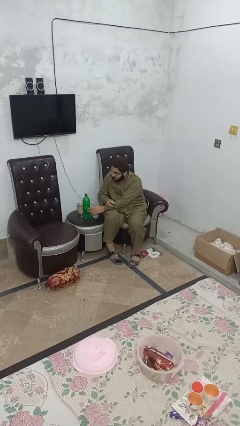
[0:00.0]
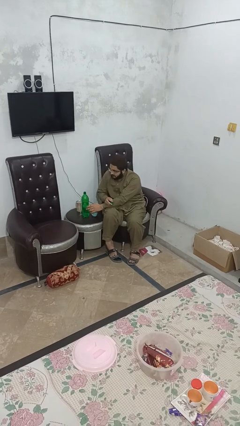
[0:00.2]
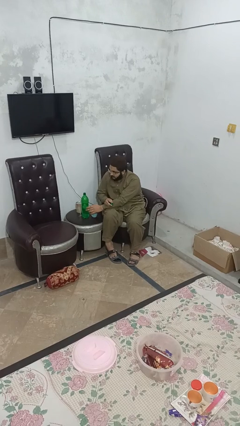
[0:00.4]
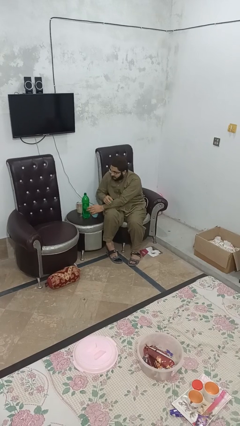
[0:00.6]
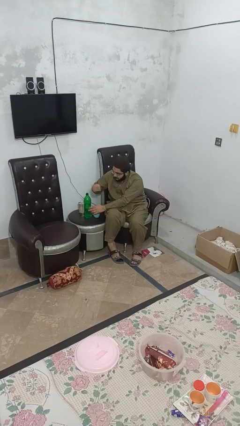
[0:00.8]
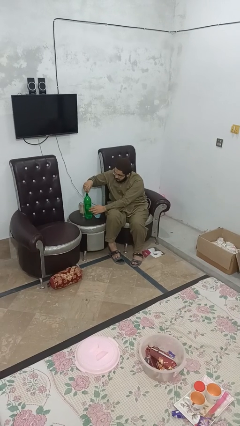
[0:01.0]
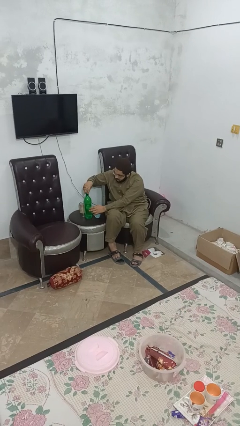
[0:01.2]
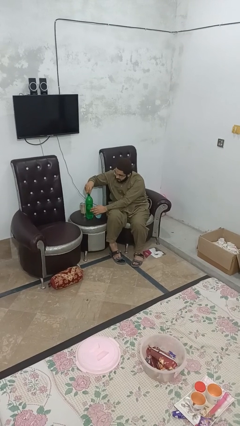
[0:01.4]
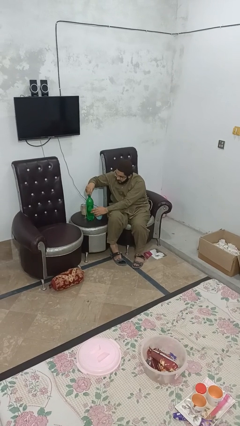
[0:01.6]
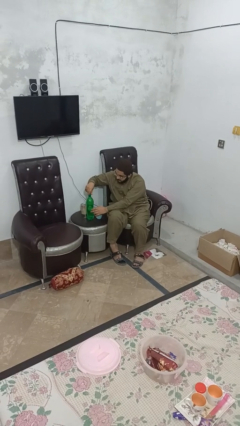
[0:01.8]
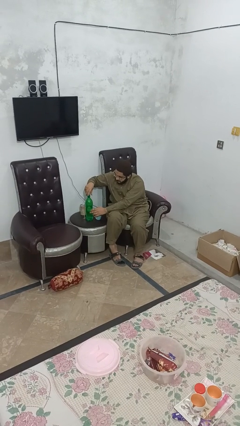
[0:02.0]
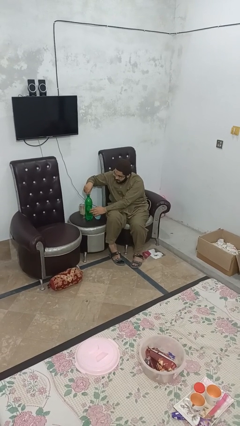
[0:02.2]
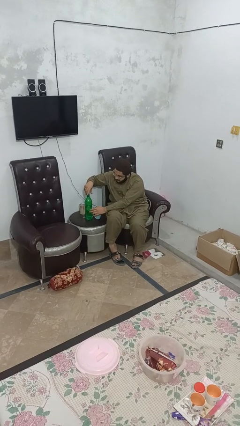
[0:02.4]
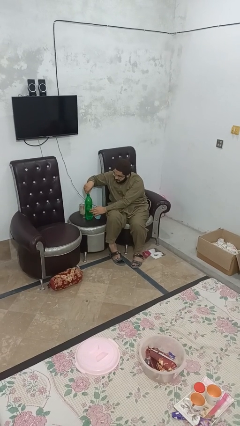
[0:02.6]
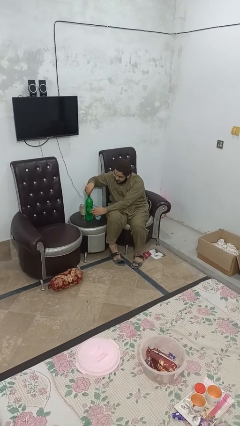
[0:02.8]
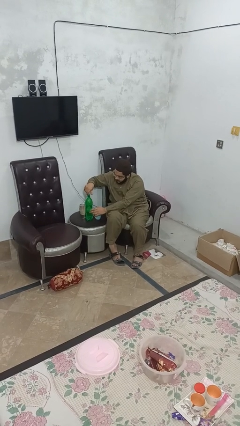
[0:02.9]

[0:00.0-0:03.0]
person screws lid to bottle

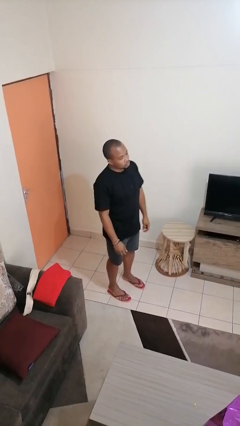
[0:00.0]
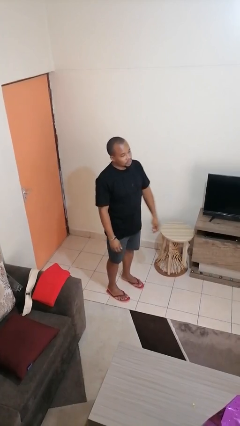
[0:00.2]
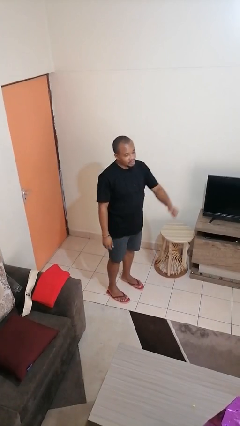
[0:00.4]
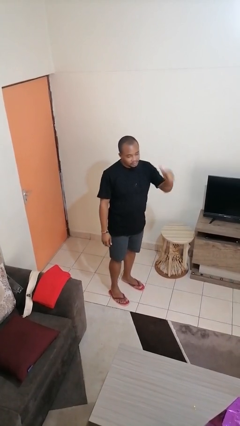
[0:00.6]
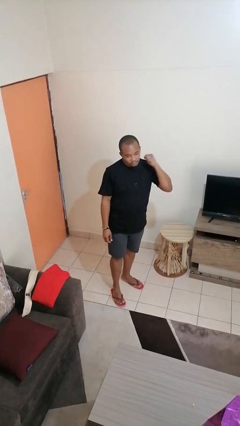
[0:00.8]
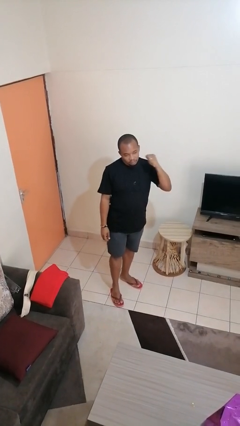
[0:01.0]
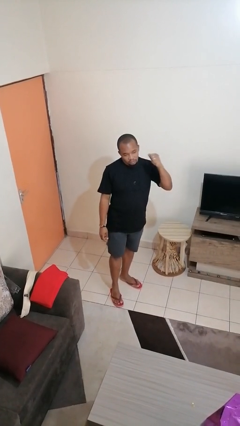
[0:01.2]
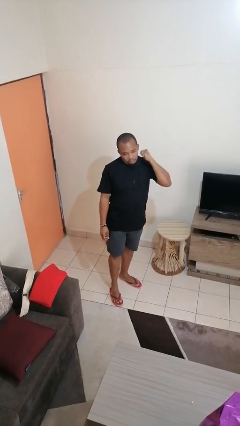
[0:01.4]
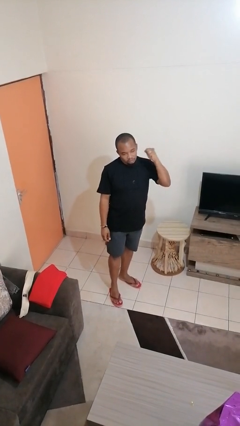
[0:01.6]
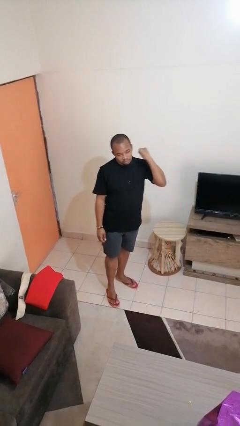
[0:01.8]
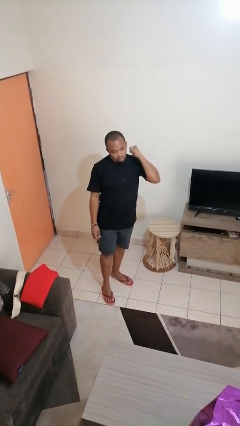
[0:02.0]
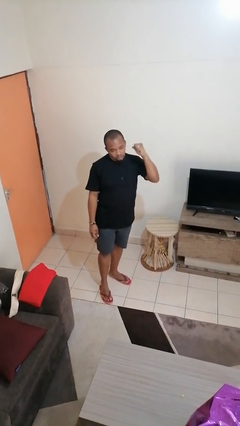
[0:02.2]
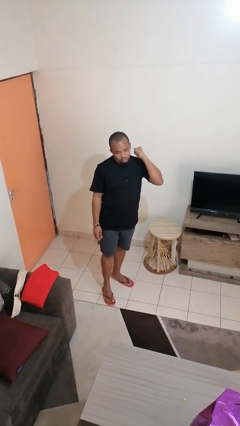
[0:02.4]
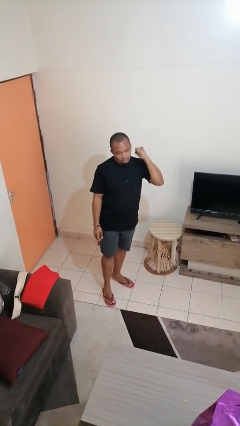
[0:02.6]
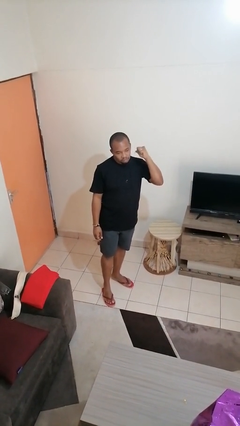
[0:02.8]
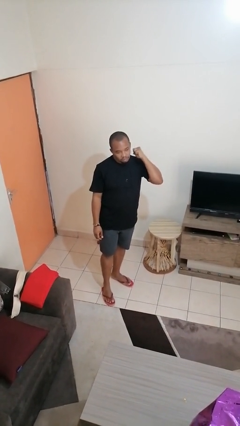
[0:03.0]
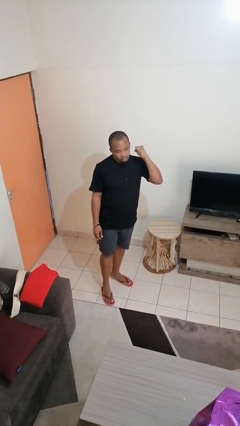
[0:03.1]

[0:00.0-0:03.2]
person gestures behind me

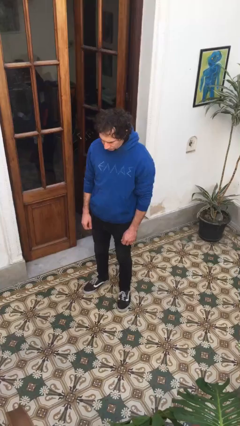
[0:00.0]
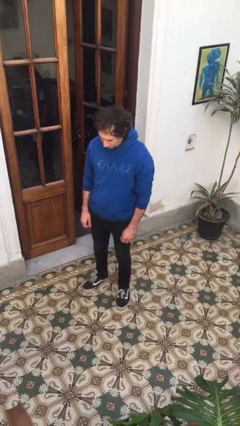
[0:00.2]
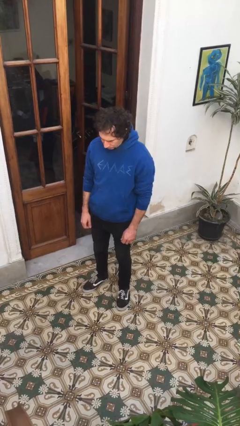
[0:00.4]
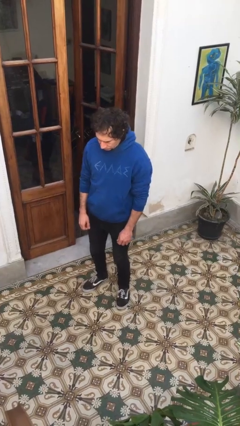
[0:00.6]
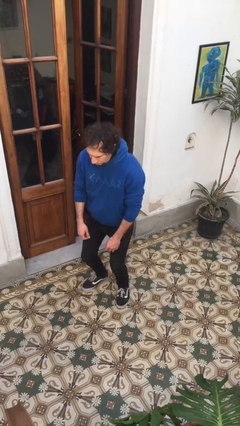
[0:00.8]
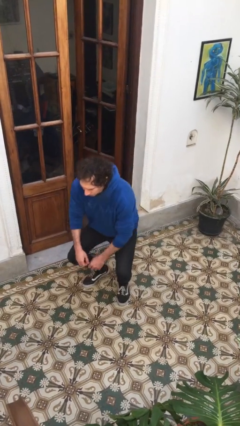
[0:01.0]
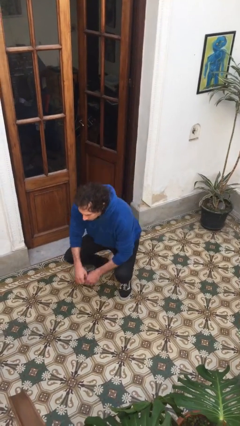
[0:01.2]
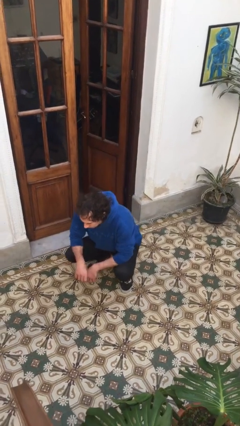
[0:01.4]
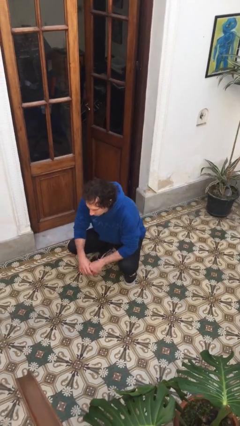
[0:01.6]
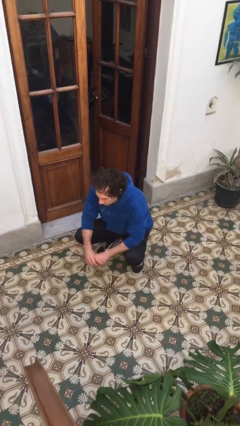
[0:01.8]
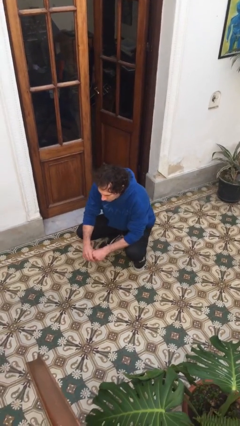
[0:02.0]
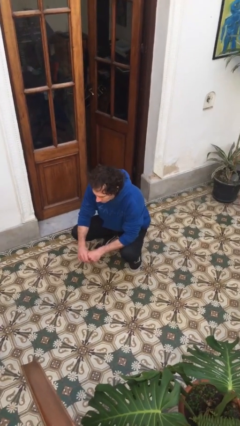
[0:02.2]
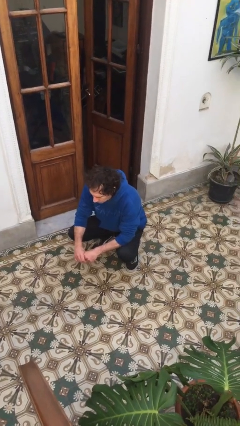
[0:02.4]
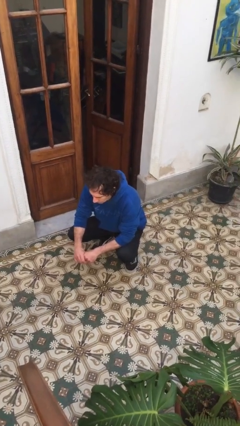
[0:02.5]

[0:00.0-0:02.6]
person squats

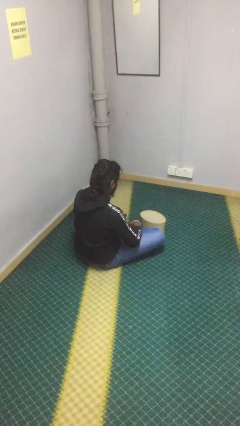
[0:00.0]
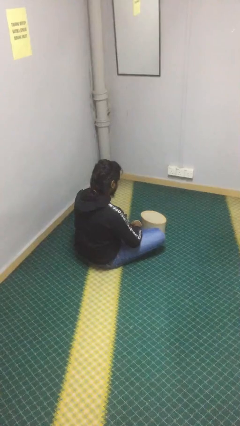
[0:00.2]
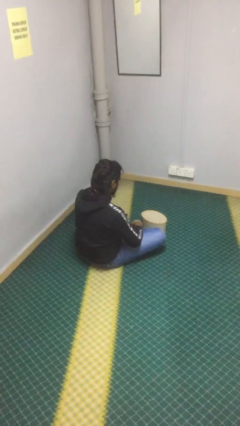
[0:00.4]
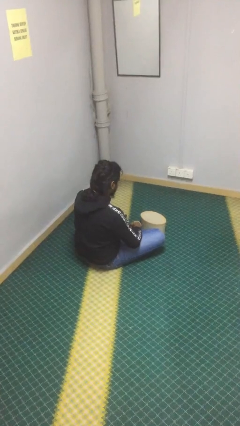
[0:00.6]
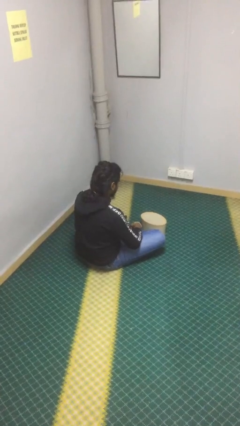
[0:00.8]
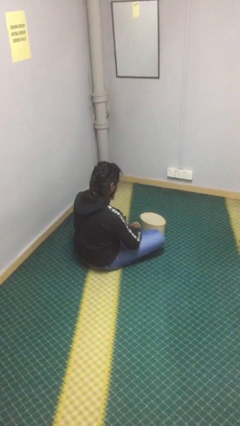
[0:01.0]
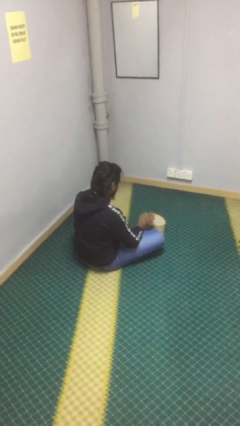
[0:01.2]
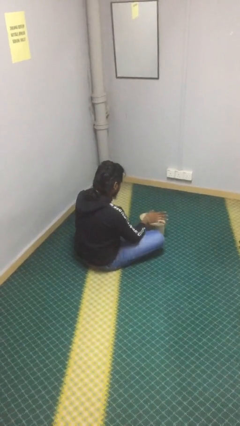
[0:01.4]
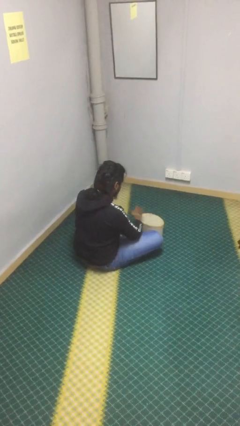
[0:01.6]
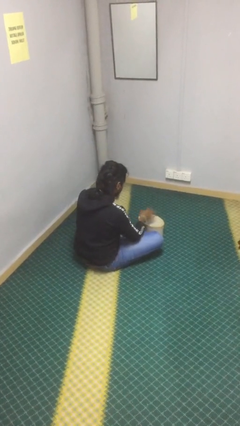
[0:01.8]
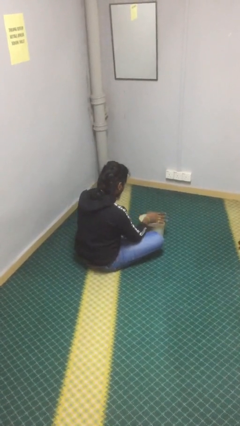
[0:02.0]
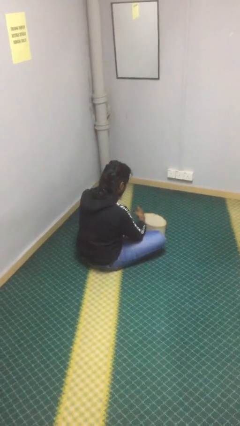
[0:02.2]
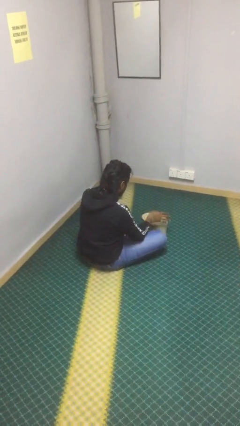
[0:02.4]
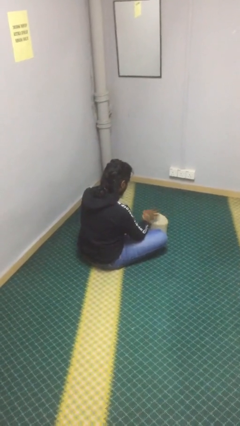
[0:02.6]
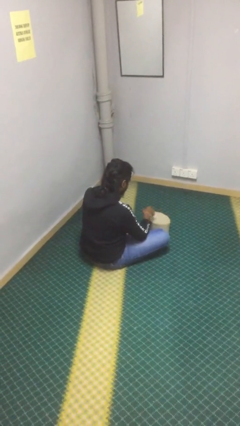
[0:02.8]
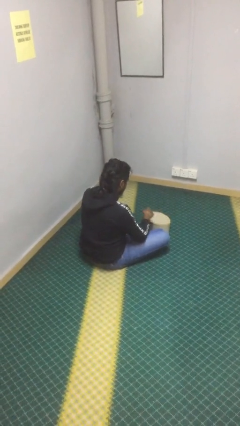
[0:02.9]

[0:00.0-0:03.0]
person waves hand over object

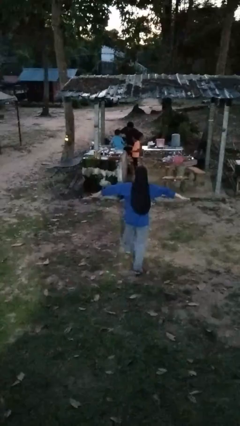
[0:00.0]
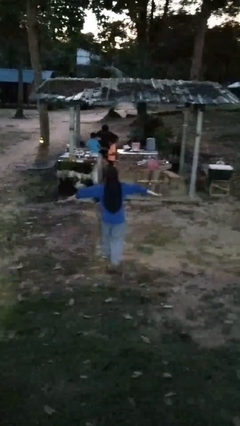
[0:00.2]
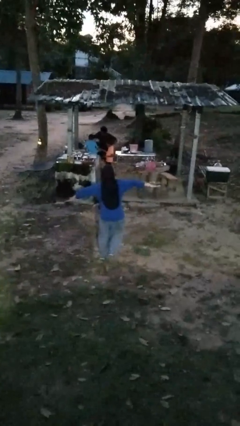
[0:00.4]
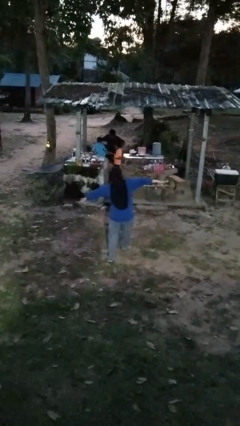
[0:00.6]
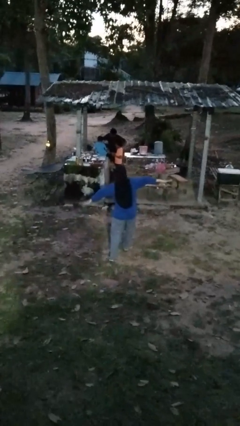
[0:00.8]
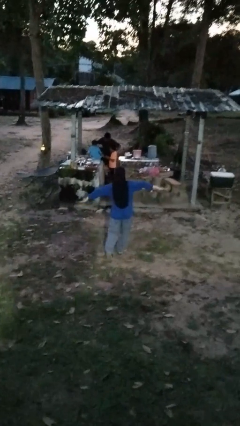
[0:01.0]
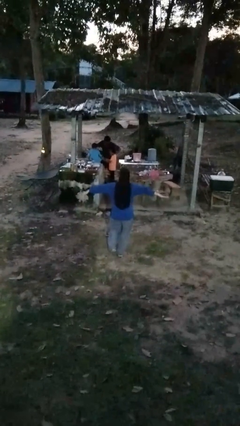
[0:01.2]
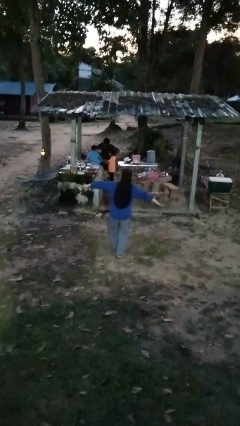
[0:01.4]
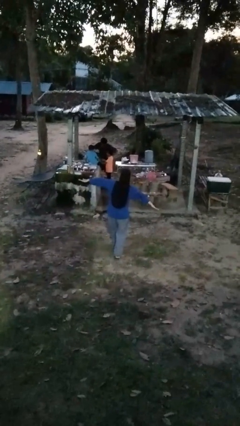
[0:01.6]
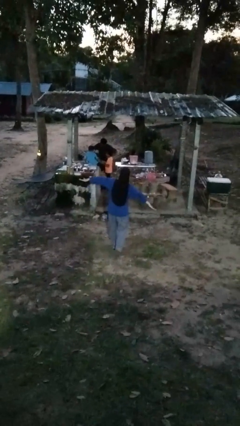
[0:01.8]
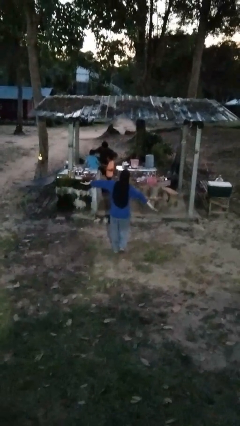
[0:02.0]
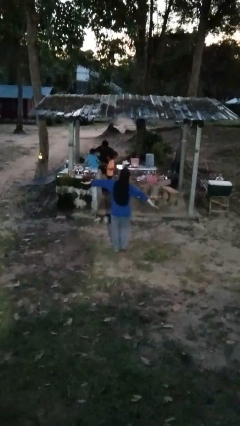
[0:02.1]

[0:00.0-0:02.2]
person walks tiptoe

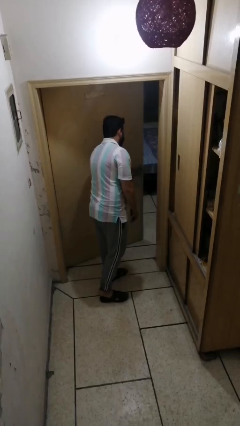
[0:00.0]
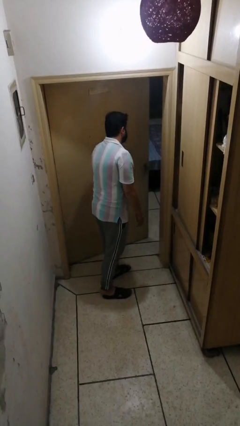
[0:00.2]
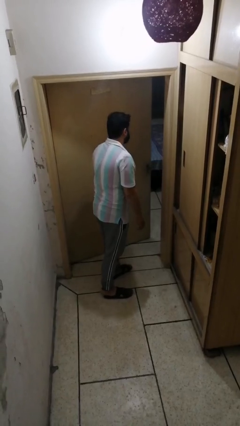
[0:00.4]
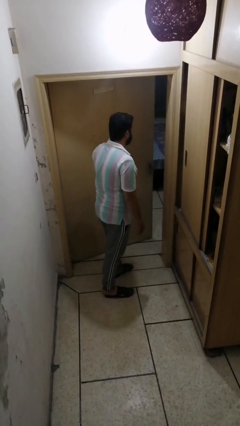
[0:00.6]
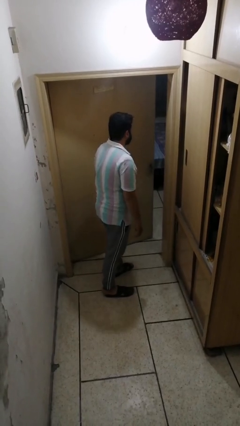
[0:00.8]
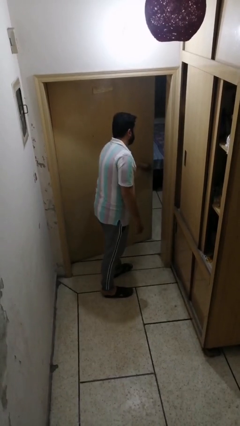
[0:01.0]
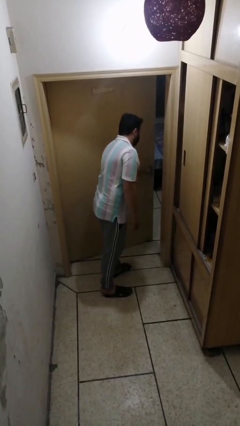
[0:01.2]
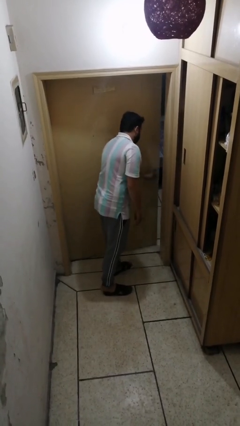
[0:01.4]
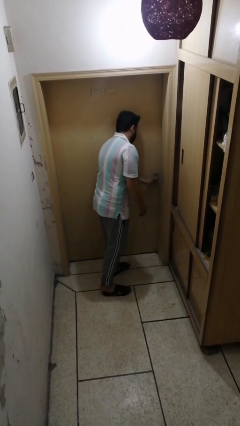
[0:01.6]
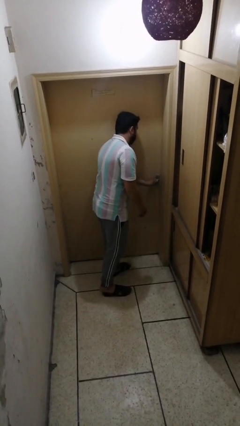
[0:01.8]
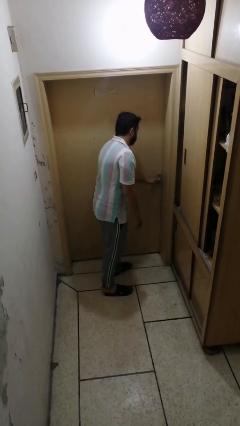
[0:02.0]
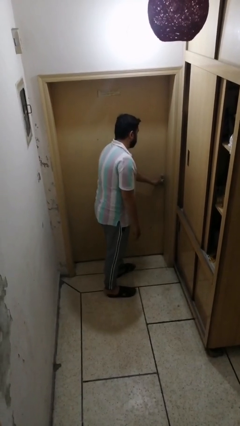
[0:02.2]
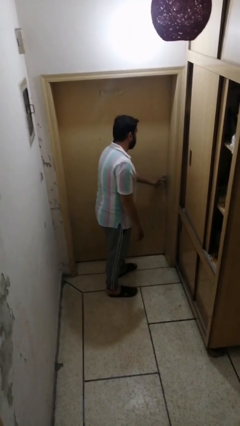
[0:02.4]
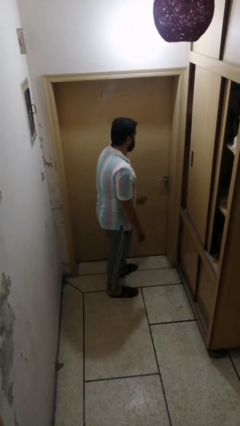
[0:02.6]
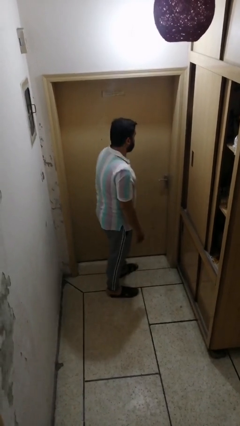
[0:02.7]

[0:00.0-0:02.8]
person closes facility door

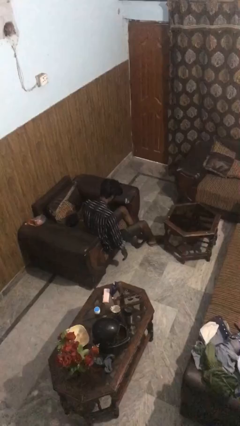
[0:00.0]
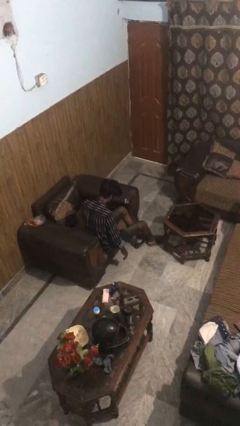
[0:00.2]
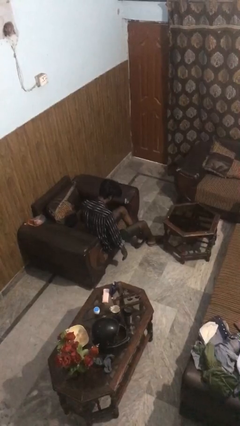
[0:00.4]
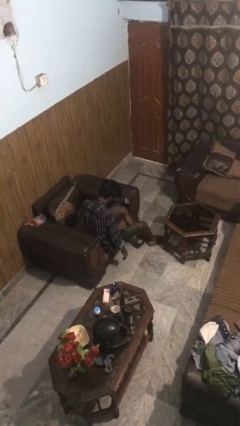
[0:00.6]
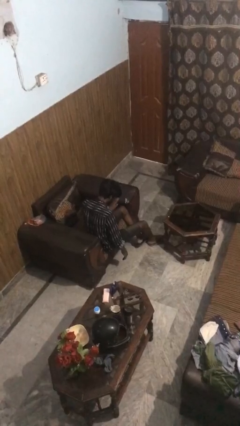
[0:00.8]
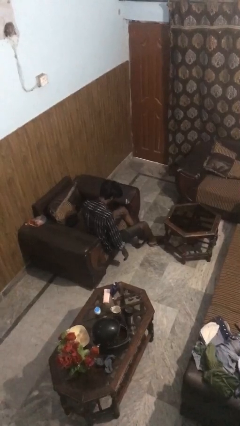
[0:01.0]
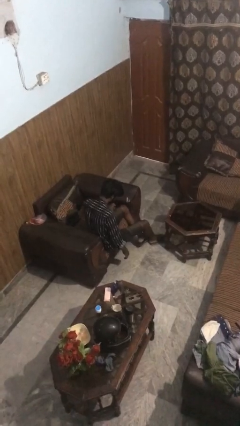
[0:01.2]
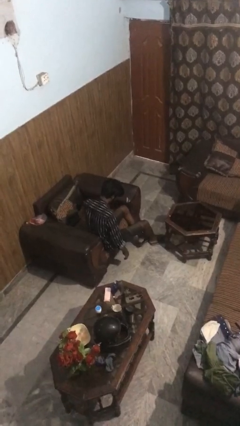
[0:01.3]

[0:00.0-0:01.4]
person slaps hands on thighs
